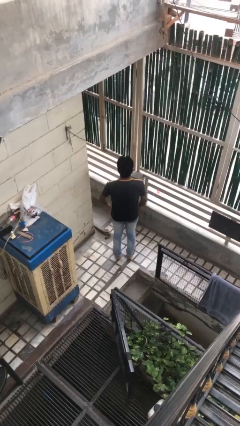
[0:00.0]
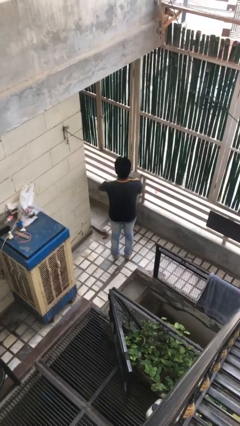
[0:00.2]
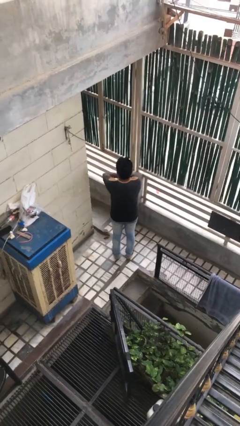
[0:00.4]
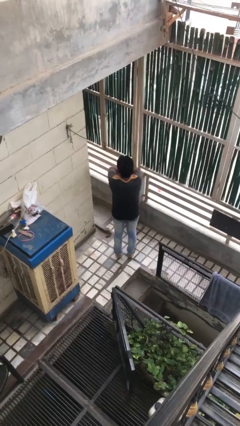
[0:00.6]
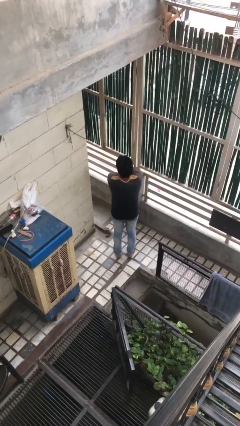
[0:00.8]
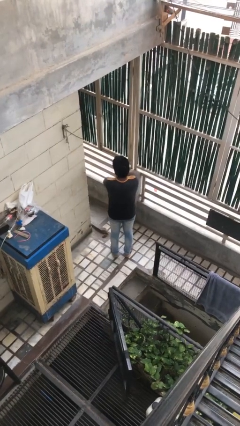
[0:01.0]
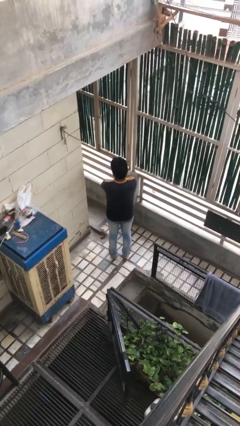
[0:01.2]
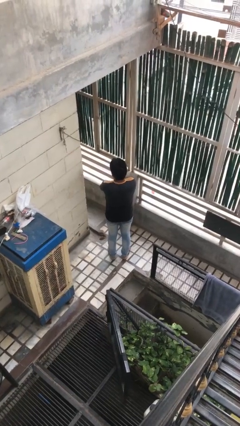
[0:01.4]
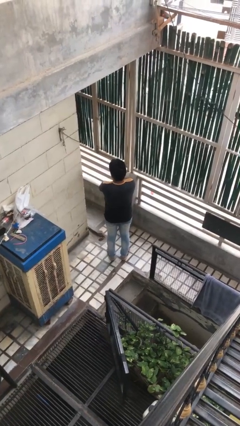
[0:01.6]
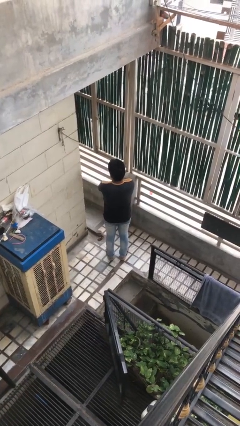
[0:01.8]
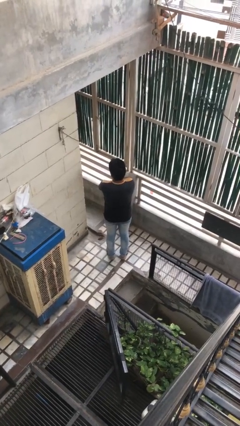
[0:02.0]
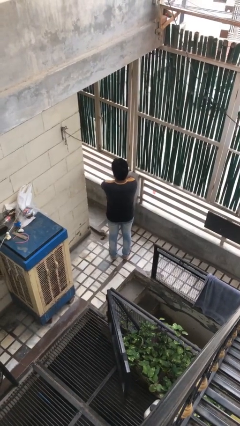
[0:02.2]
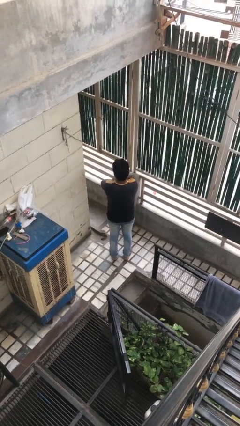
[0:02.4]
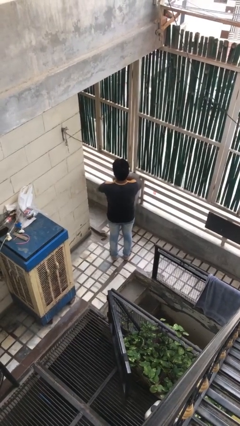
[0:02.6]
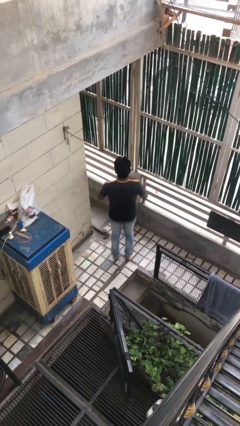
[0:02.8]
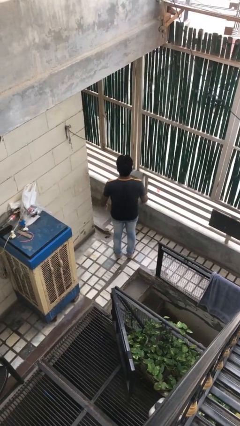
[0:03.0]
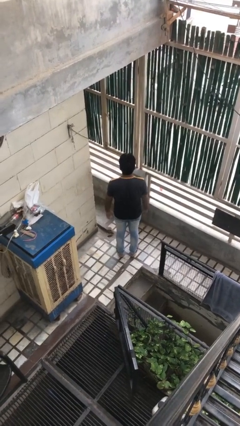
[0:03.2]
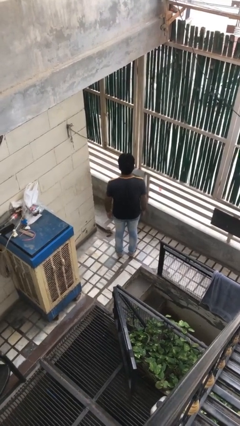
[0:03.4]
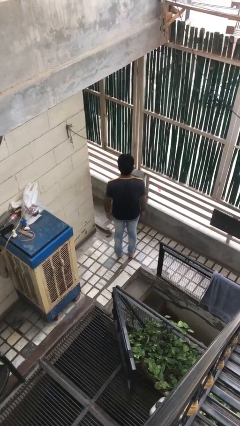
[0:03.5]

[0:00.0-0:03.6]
person crosses arms

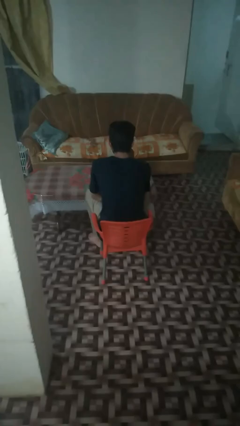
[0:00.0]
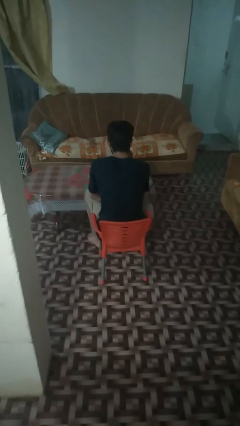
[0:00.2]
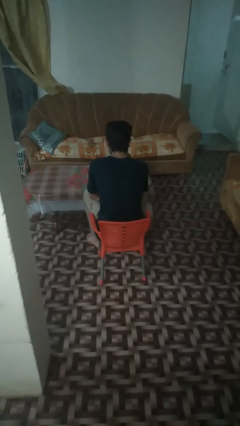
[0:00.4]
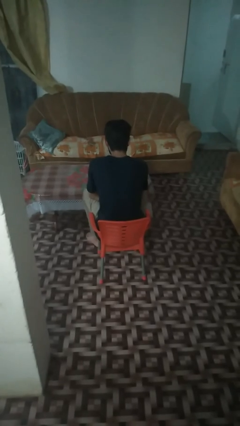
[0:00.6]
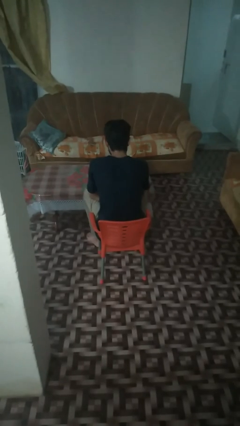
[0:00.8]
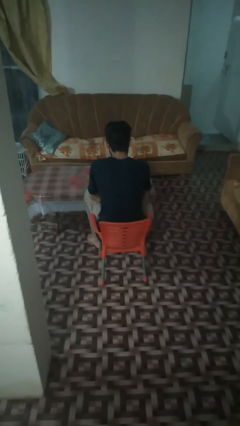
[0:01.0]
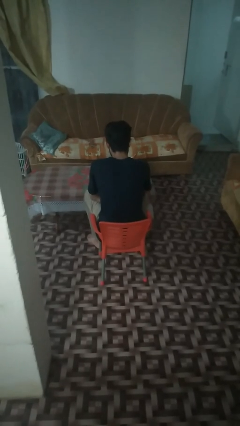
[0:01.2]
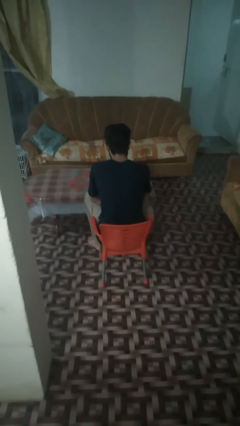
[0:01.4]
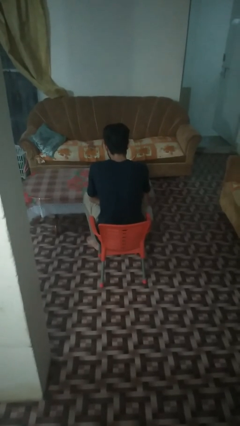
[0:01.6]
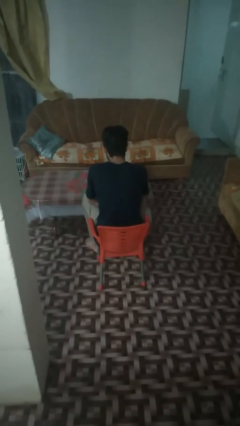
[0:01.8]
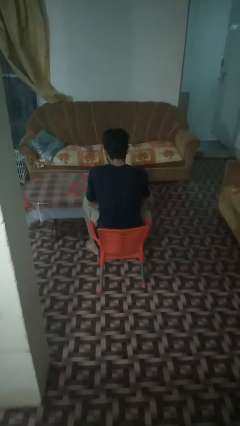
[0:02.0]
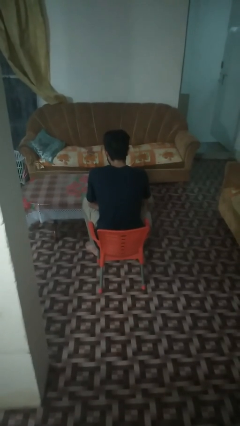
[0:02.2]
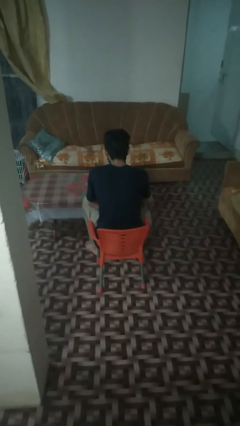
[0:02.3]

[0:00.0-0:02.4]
person puts down object on table

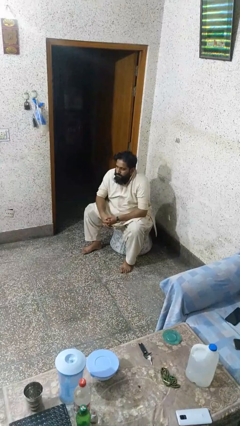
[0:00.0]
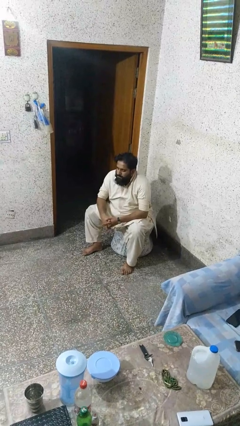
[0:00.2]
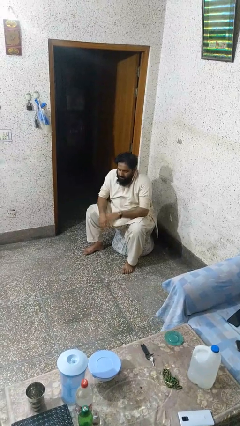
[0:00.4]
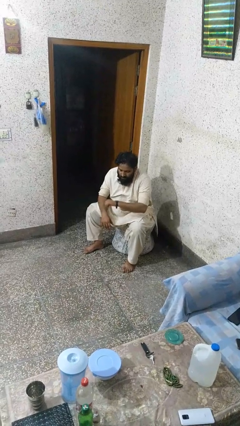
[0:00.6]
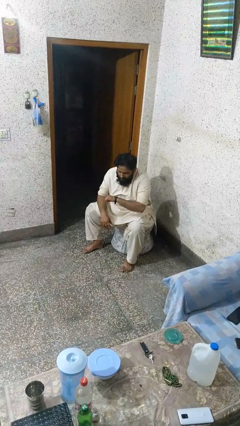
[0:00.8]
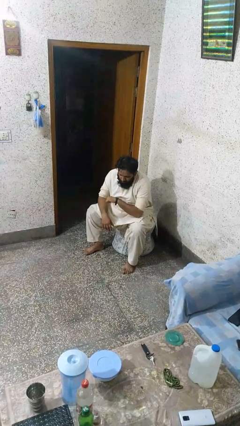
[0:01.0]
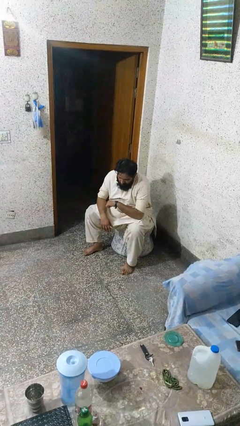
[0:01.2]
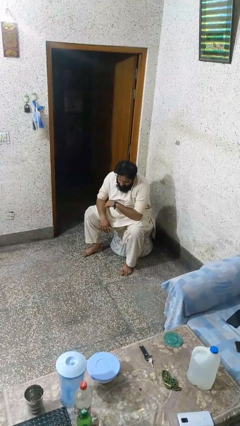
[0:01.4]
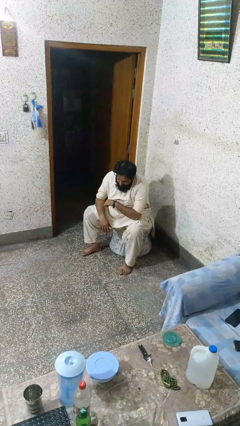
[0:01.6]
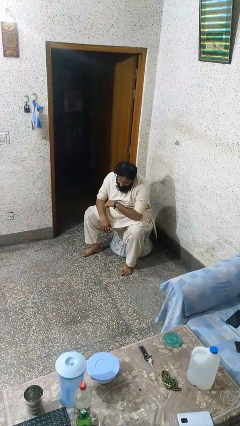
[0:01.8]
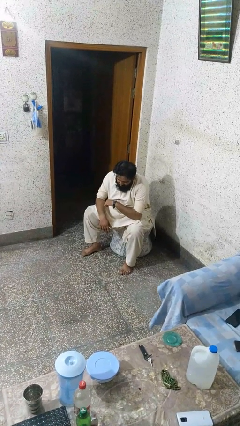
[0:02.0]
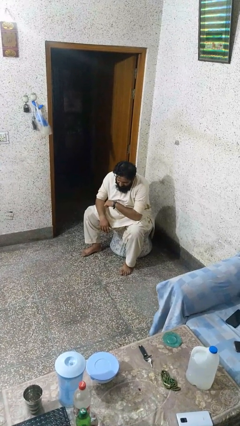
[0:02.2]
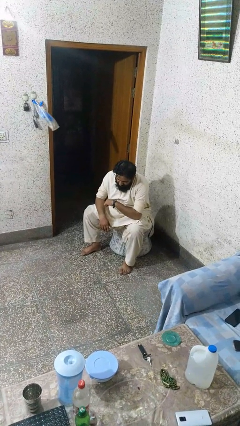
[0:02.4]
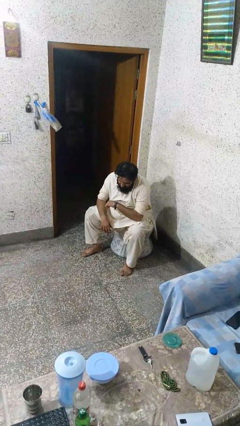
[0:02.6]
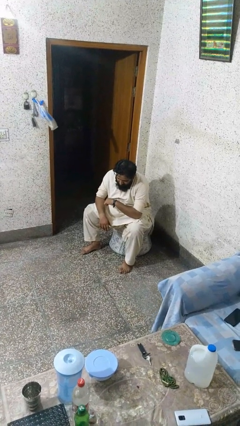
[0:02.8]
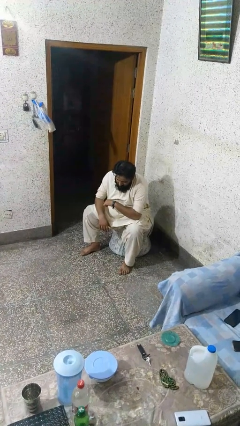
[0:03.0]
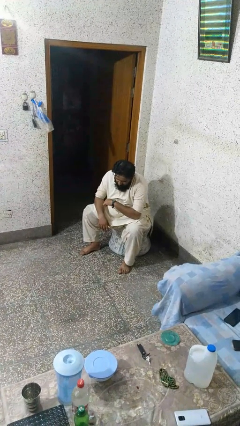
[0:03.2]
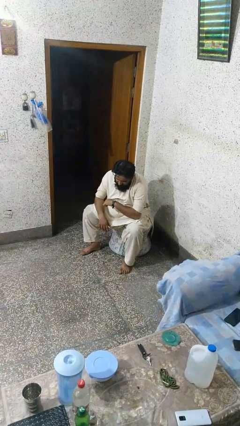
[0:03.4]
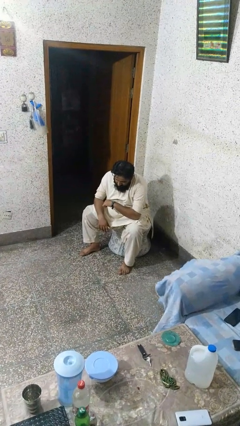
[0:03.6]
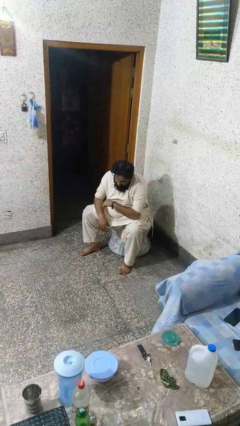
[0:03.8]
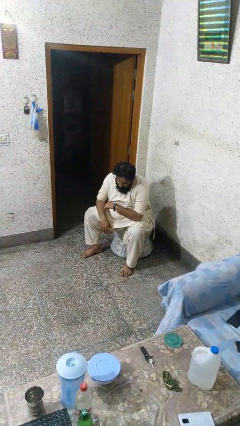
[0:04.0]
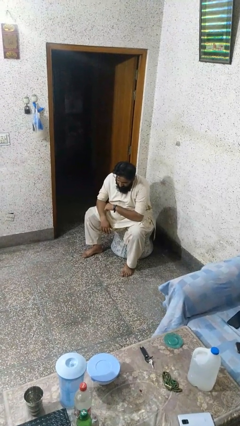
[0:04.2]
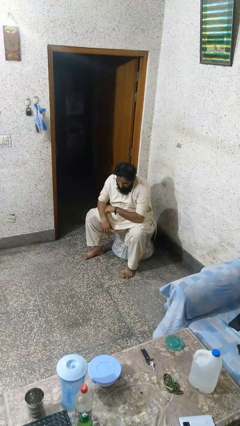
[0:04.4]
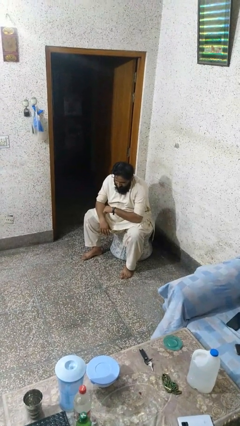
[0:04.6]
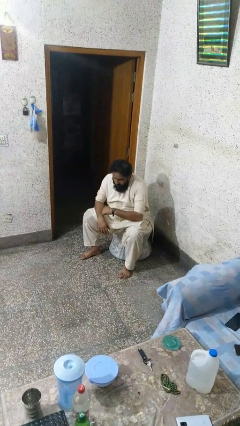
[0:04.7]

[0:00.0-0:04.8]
person looks at wristwatch

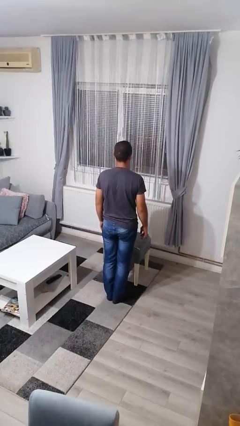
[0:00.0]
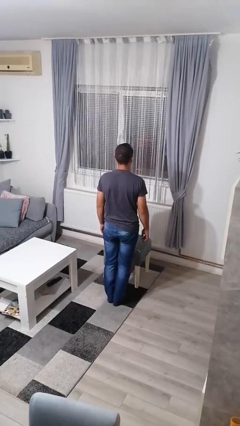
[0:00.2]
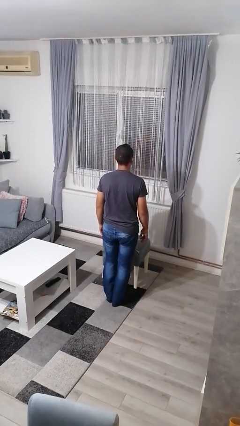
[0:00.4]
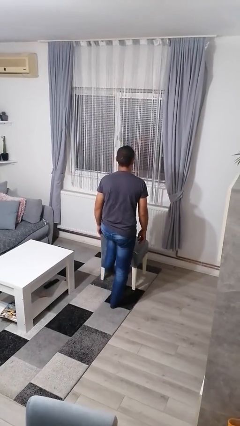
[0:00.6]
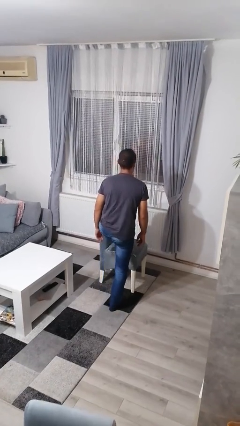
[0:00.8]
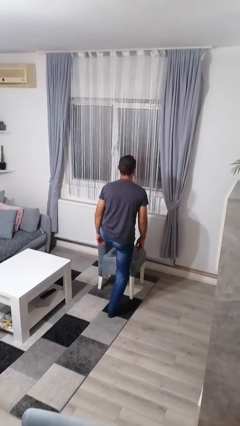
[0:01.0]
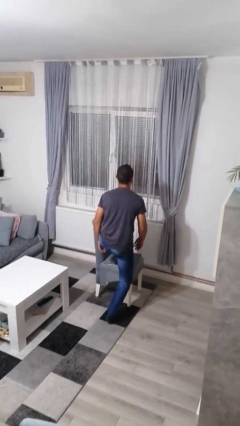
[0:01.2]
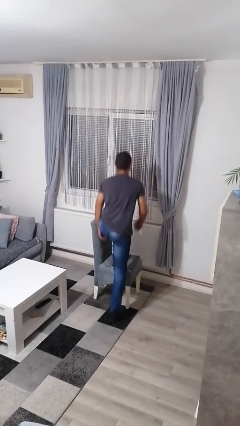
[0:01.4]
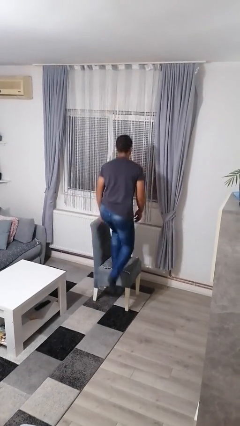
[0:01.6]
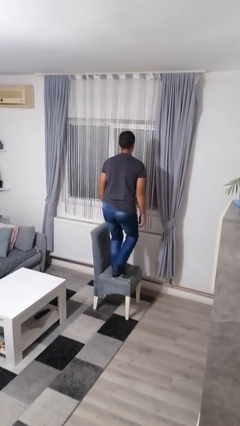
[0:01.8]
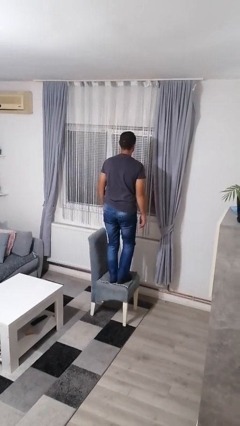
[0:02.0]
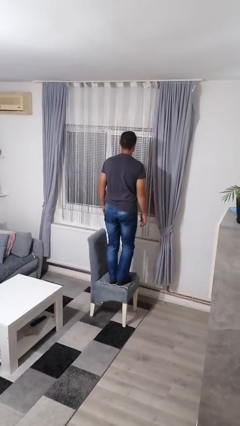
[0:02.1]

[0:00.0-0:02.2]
person climbs on chair

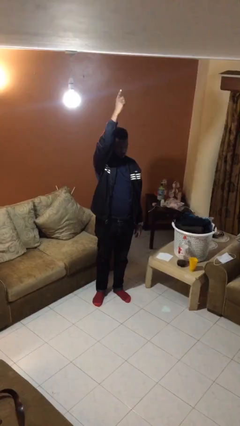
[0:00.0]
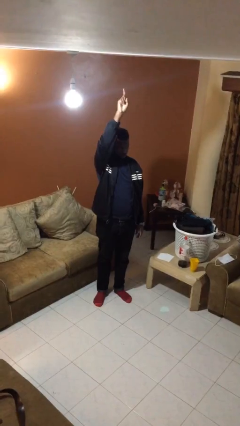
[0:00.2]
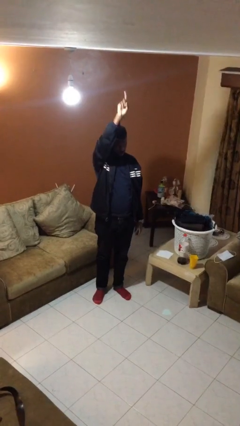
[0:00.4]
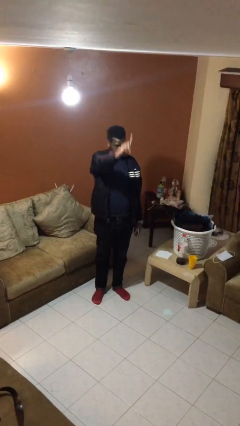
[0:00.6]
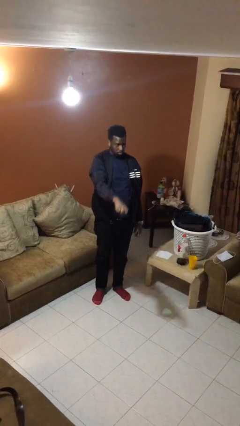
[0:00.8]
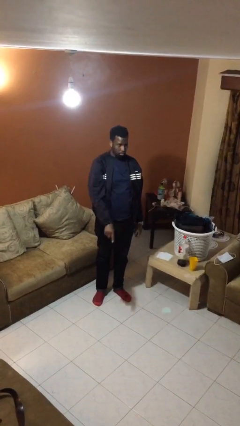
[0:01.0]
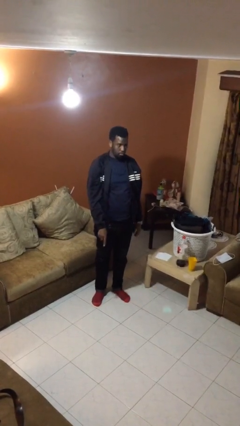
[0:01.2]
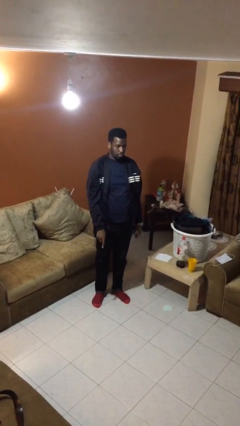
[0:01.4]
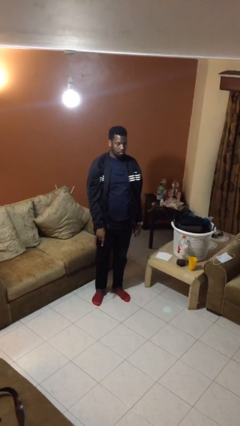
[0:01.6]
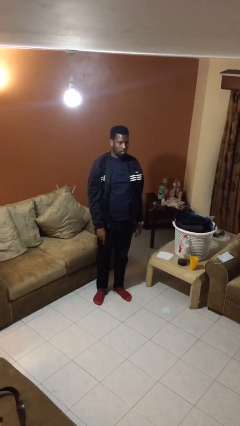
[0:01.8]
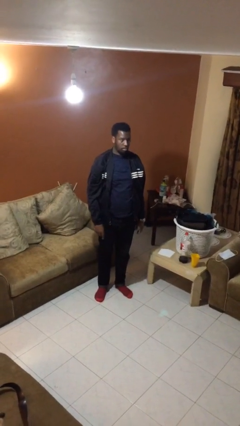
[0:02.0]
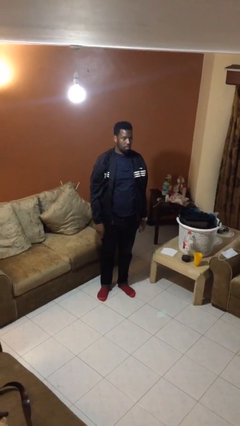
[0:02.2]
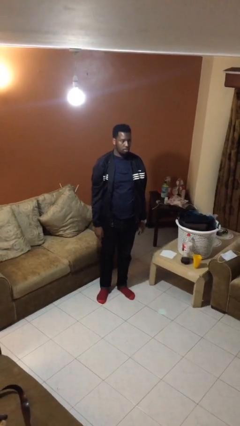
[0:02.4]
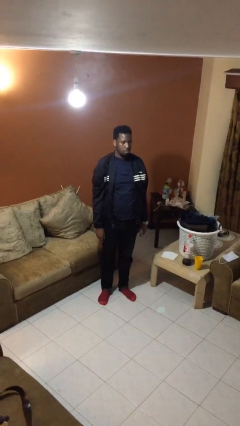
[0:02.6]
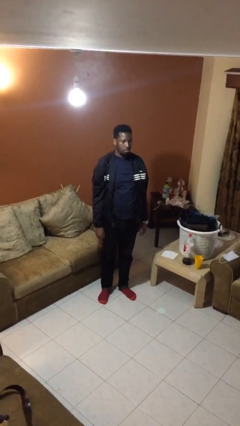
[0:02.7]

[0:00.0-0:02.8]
person gestures swipe down

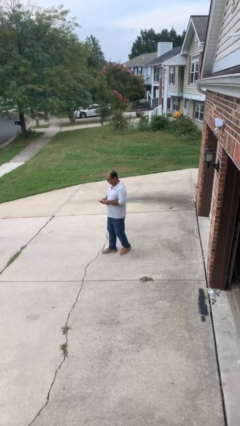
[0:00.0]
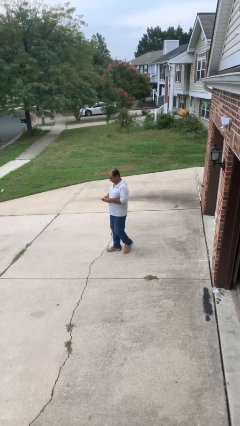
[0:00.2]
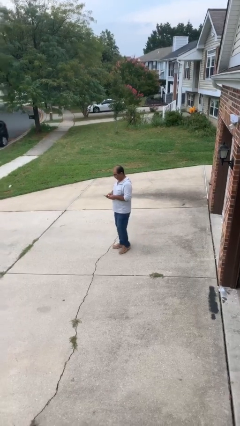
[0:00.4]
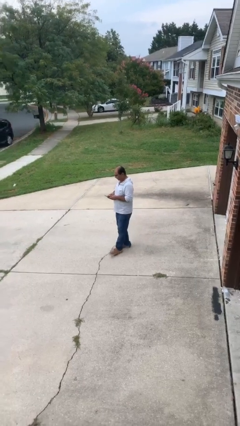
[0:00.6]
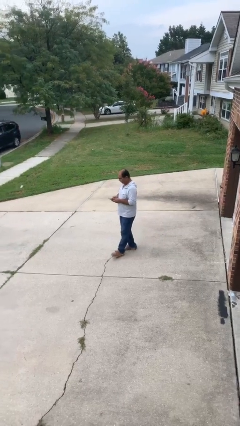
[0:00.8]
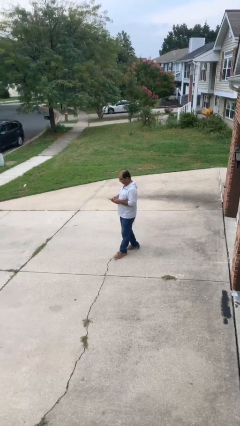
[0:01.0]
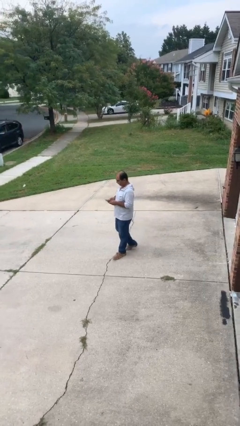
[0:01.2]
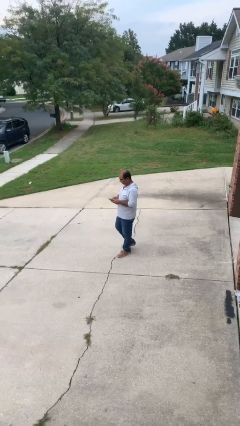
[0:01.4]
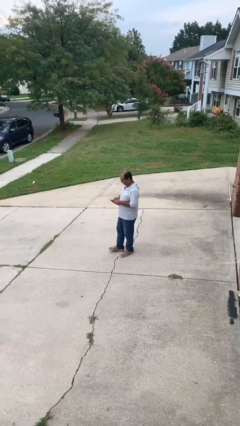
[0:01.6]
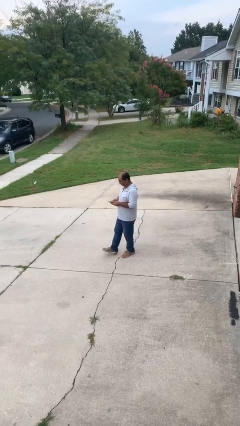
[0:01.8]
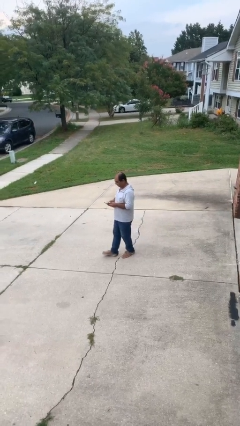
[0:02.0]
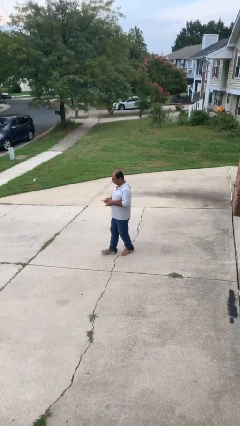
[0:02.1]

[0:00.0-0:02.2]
person texts on phone
